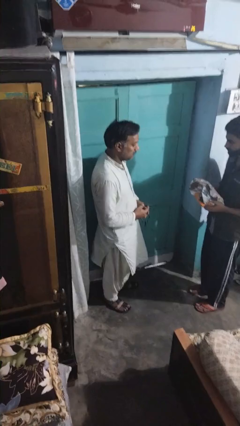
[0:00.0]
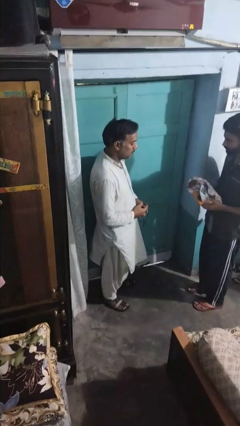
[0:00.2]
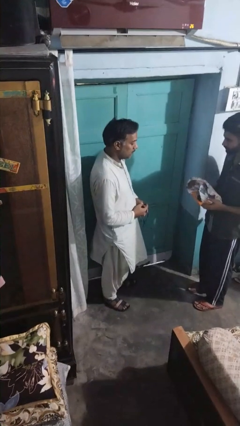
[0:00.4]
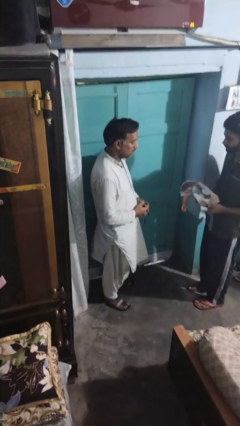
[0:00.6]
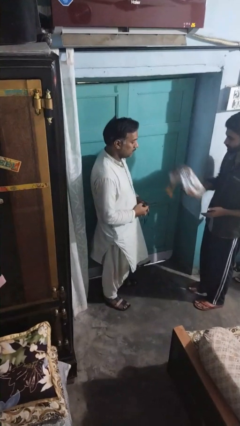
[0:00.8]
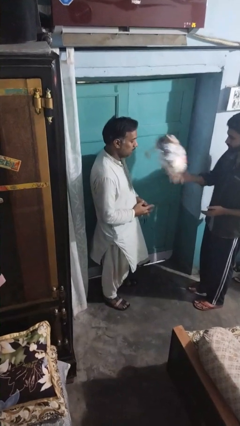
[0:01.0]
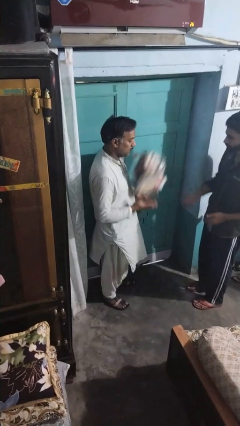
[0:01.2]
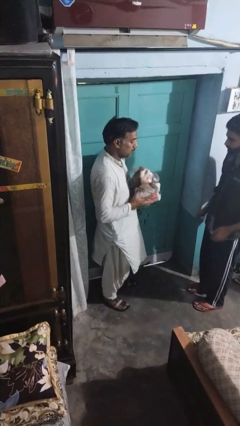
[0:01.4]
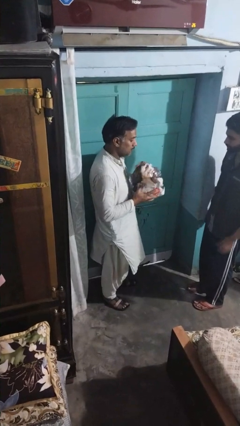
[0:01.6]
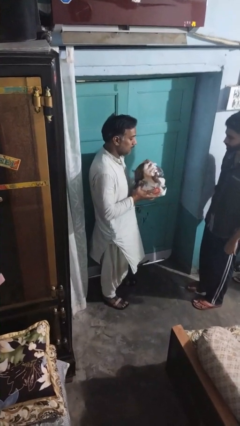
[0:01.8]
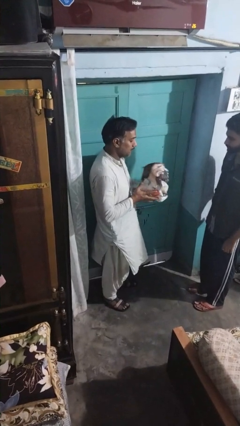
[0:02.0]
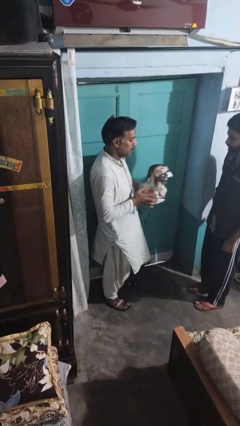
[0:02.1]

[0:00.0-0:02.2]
person catches object from person

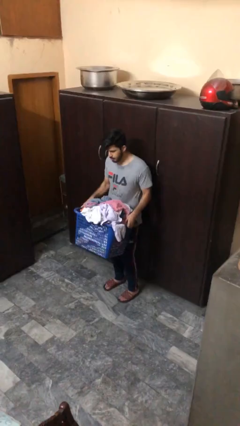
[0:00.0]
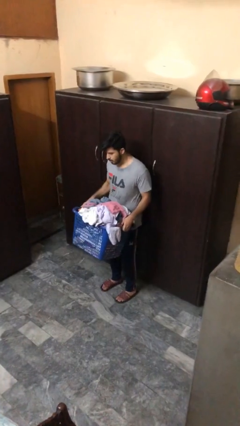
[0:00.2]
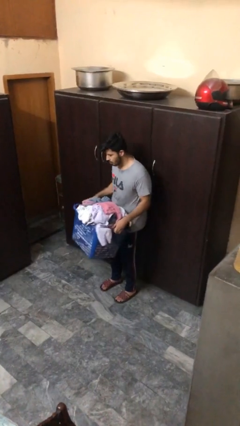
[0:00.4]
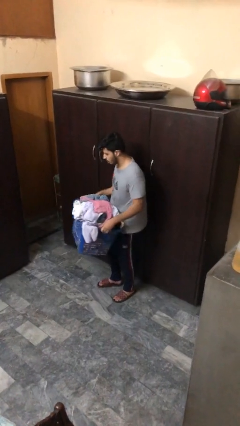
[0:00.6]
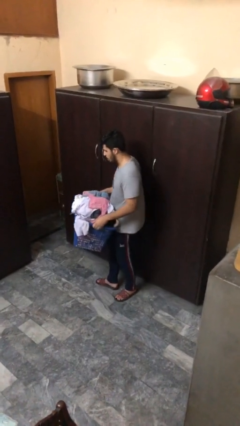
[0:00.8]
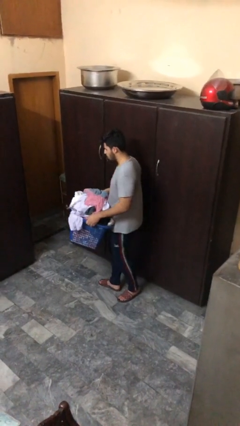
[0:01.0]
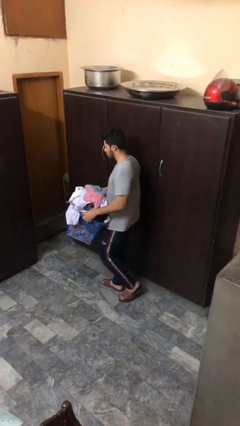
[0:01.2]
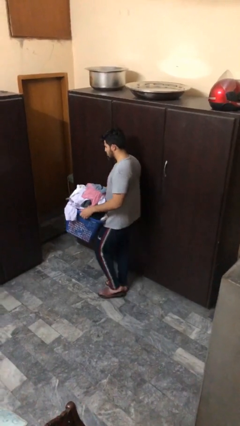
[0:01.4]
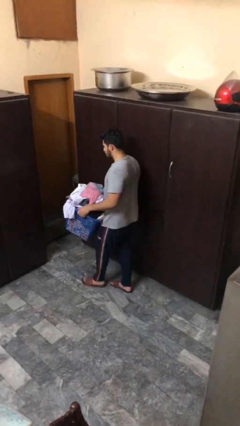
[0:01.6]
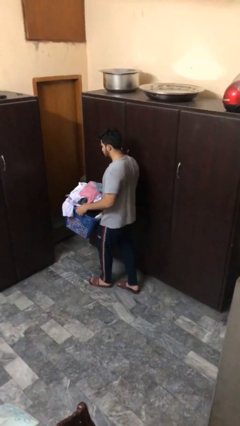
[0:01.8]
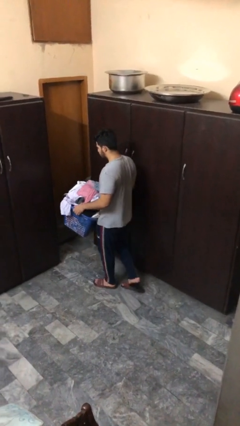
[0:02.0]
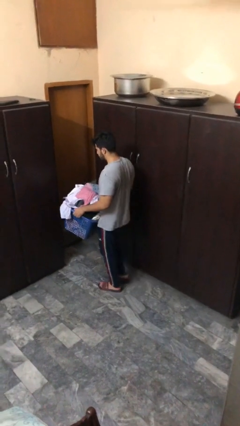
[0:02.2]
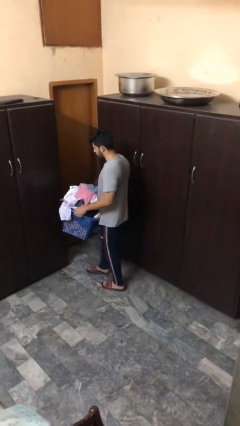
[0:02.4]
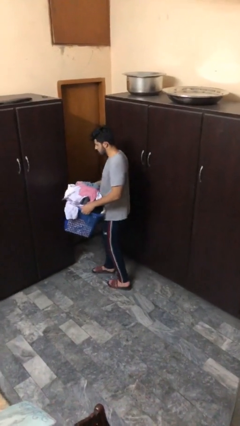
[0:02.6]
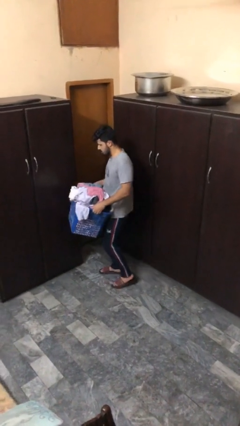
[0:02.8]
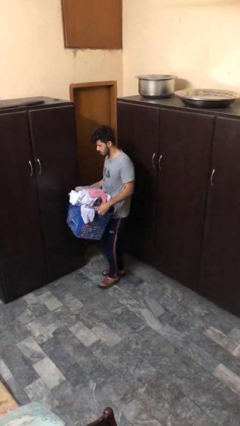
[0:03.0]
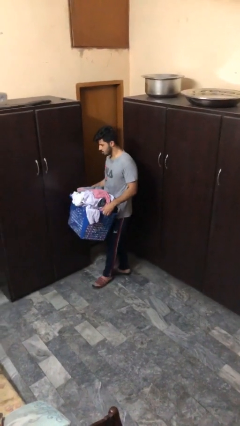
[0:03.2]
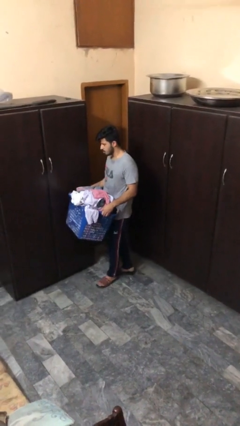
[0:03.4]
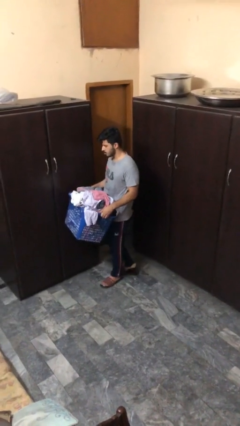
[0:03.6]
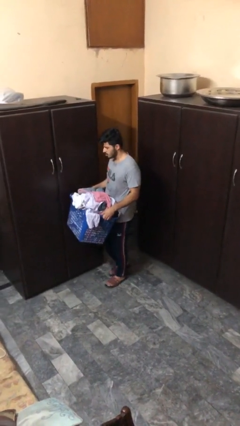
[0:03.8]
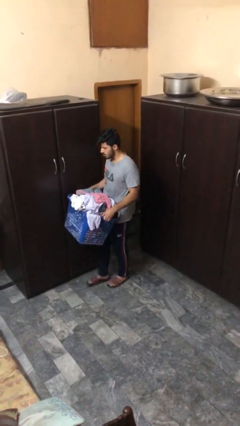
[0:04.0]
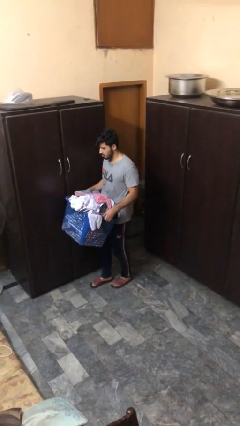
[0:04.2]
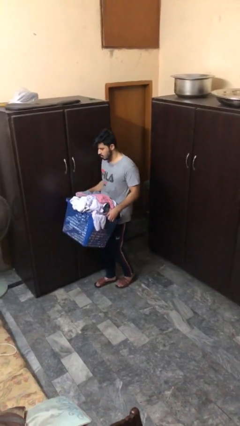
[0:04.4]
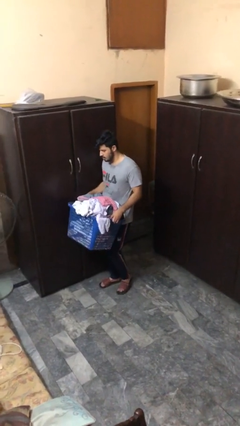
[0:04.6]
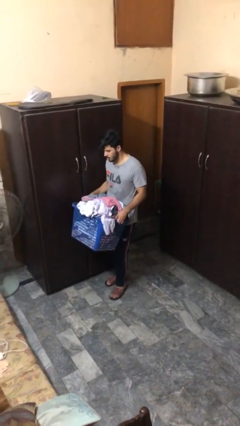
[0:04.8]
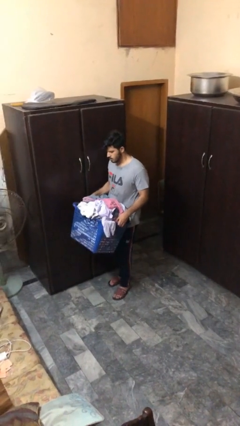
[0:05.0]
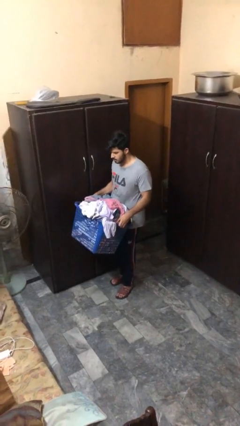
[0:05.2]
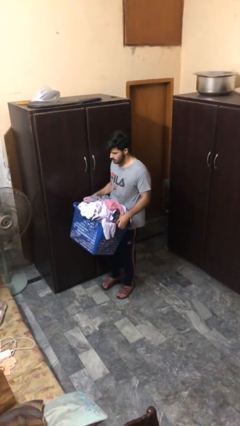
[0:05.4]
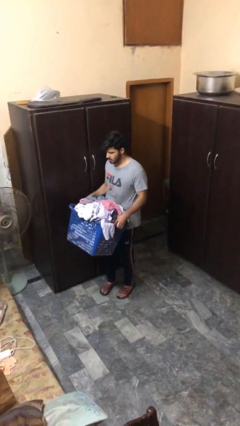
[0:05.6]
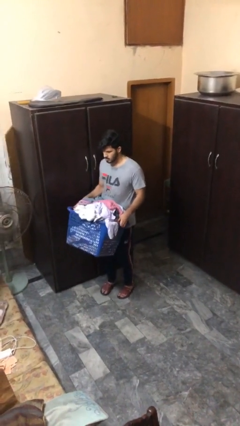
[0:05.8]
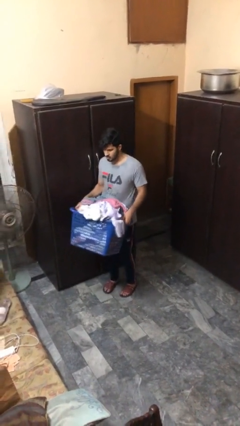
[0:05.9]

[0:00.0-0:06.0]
person carries laundry basket

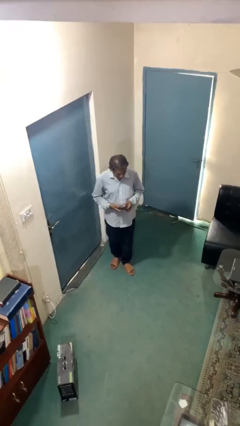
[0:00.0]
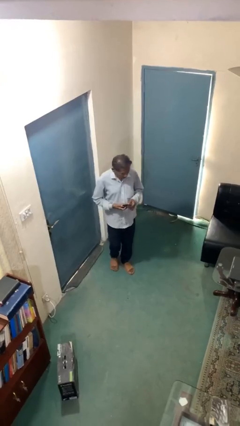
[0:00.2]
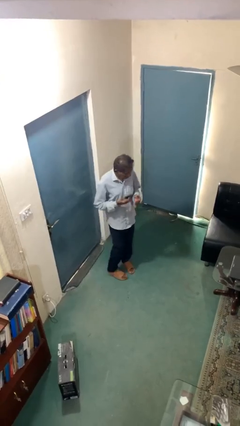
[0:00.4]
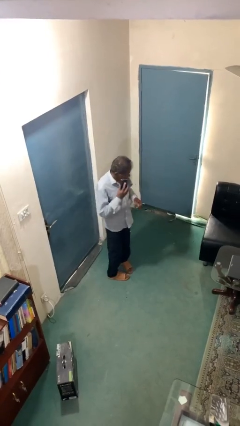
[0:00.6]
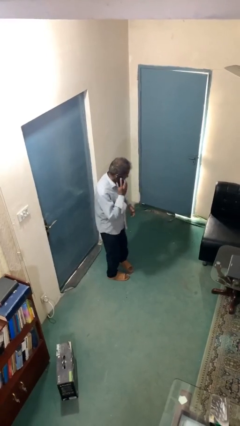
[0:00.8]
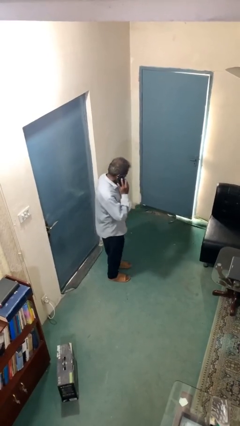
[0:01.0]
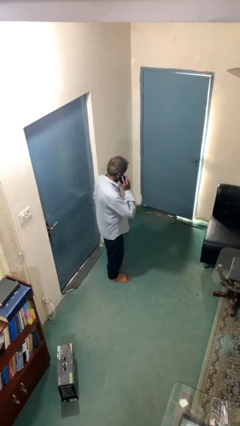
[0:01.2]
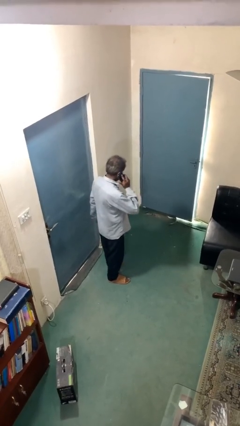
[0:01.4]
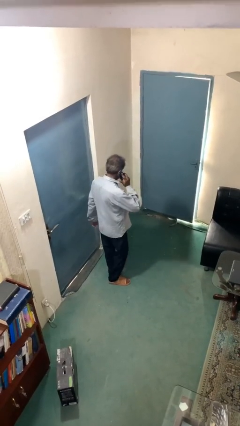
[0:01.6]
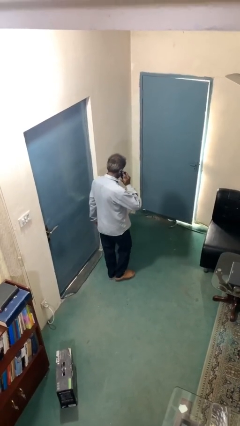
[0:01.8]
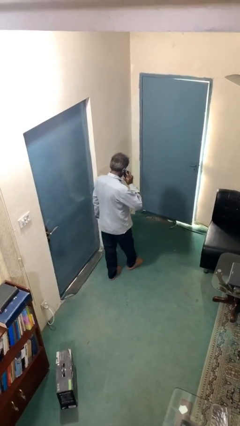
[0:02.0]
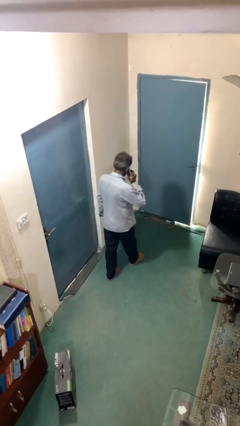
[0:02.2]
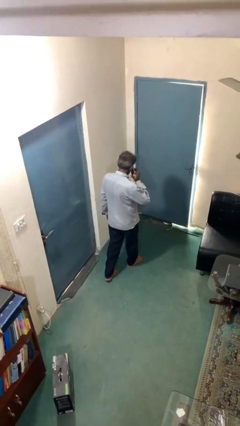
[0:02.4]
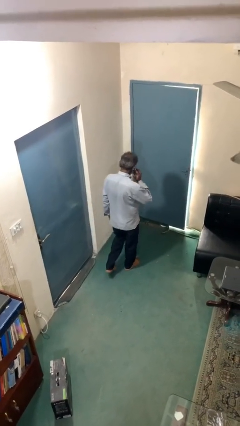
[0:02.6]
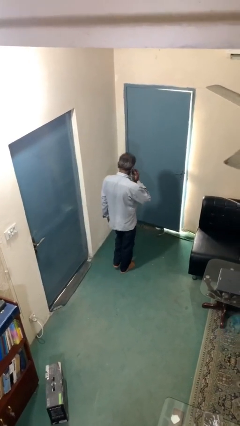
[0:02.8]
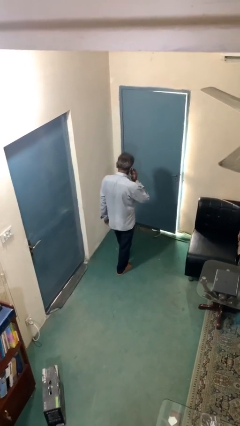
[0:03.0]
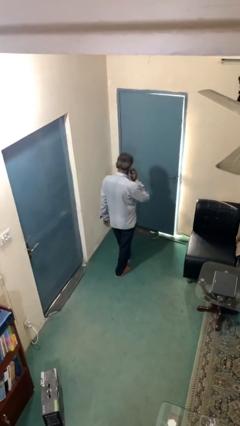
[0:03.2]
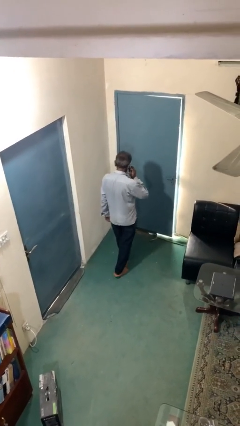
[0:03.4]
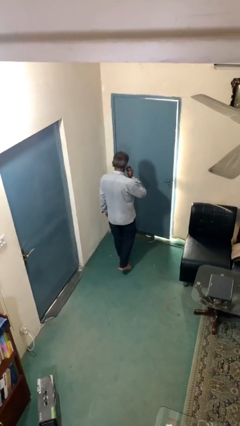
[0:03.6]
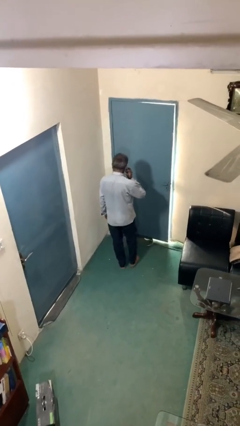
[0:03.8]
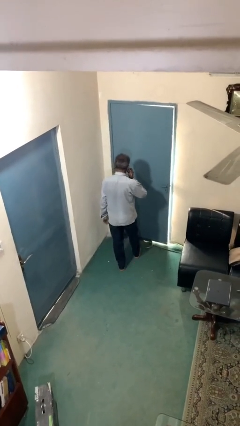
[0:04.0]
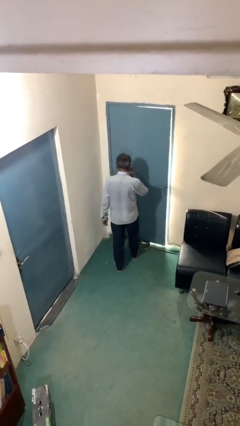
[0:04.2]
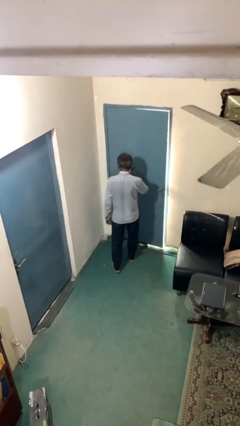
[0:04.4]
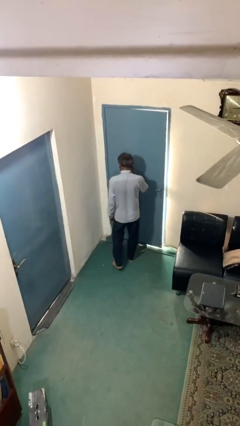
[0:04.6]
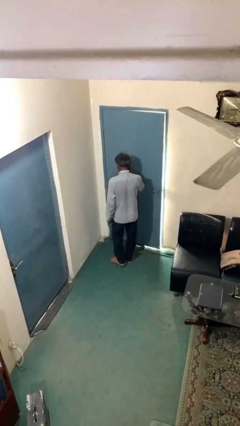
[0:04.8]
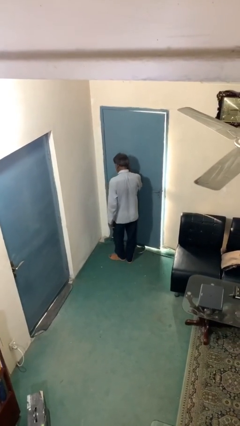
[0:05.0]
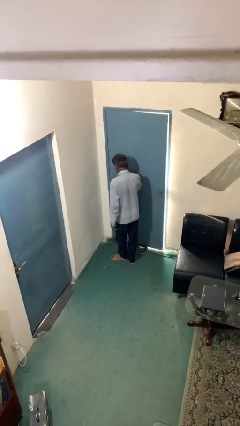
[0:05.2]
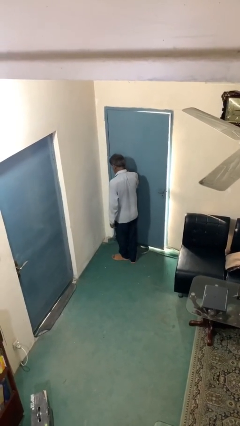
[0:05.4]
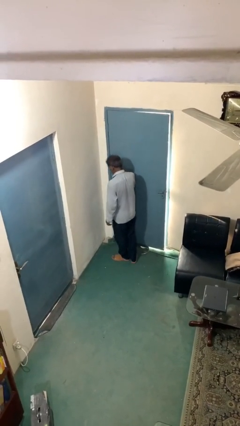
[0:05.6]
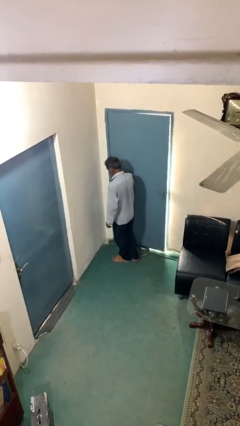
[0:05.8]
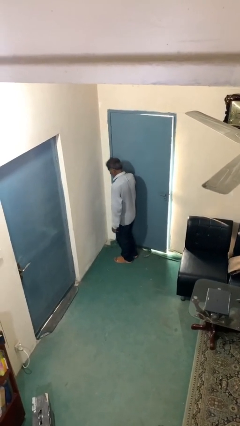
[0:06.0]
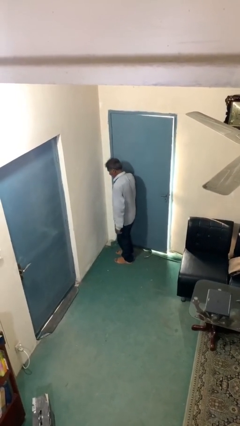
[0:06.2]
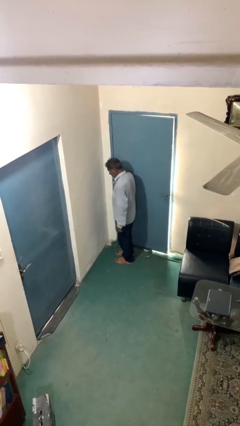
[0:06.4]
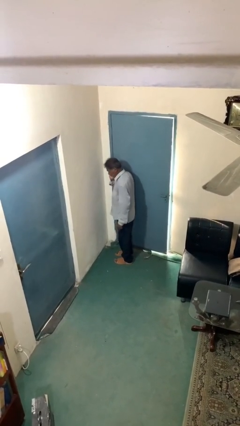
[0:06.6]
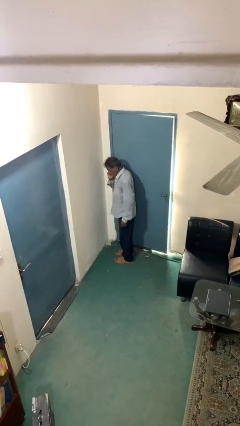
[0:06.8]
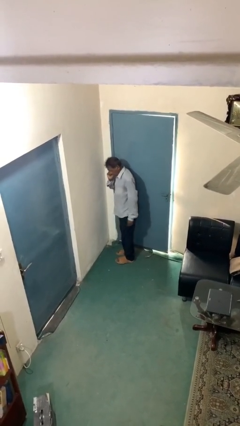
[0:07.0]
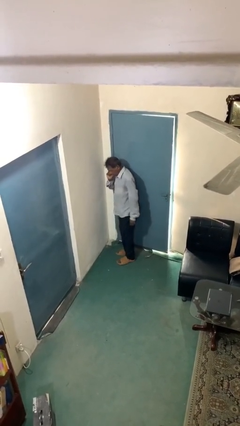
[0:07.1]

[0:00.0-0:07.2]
person talks on phone

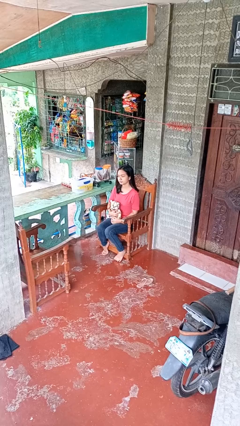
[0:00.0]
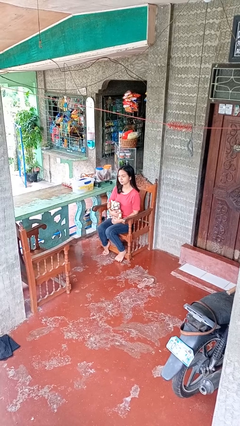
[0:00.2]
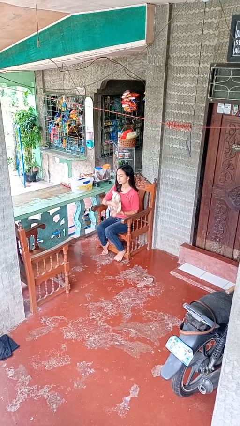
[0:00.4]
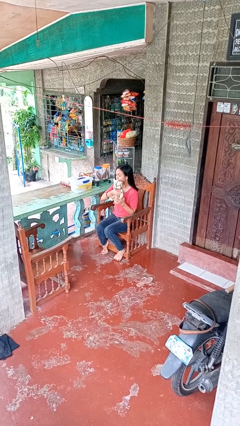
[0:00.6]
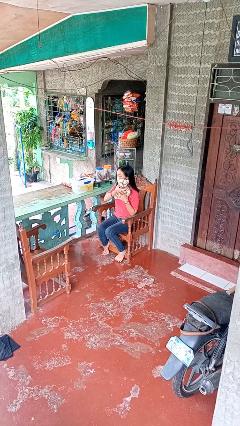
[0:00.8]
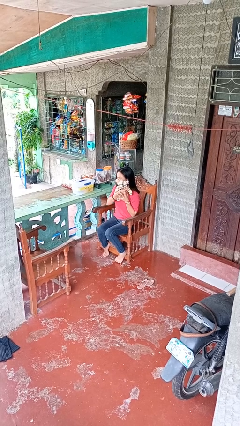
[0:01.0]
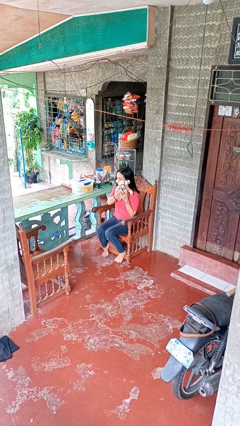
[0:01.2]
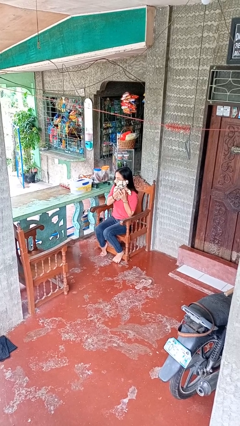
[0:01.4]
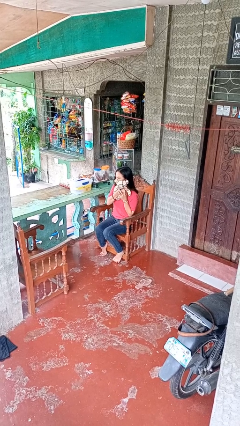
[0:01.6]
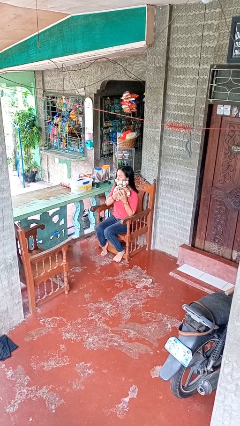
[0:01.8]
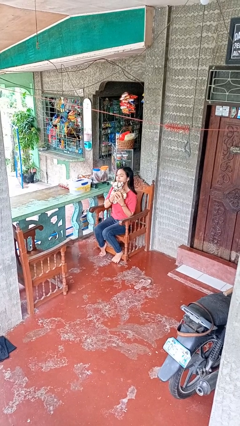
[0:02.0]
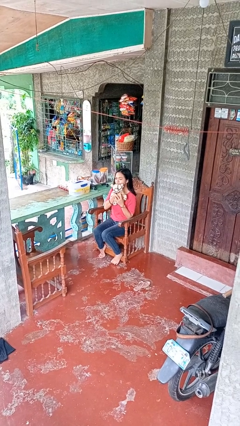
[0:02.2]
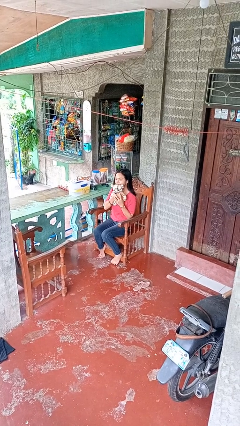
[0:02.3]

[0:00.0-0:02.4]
person hugs stuffed animal

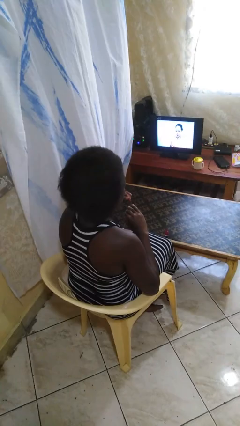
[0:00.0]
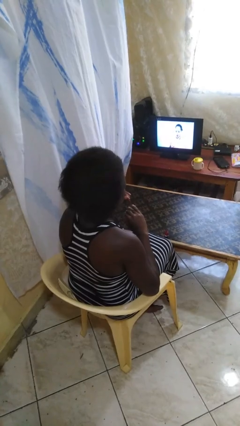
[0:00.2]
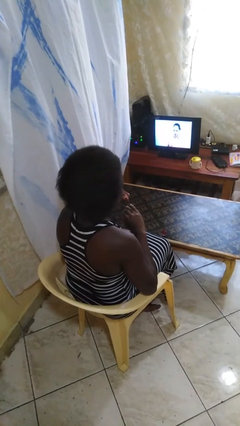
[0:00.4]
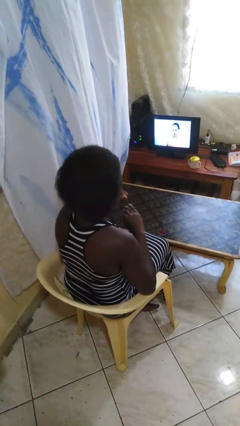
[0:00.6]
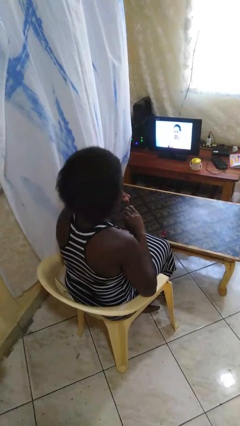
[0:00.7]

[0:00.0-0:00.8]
person paints fingernails
